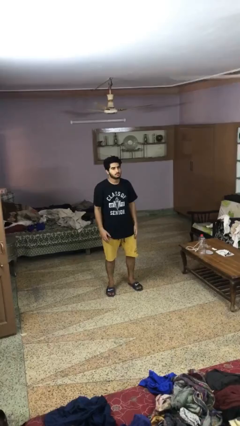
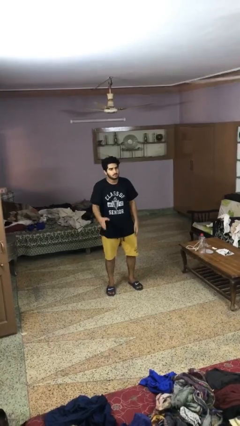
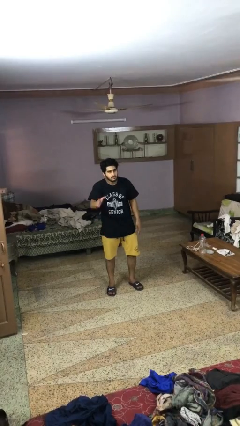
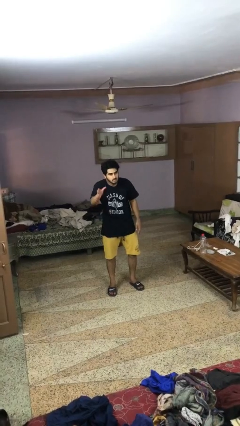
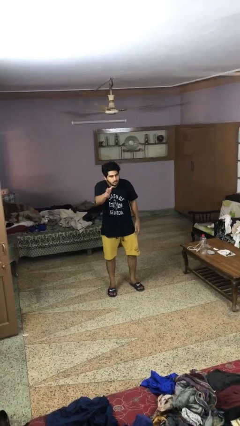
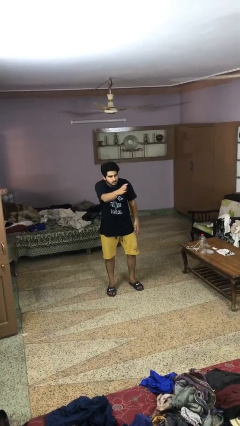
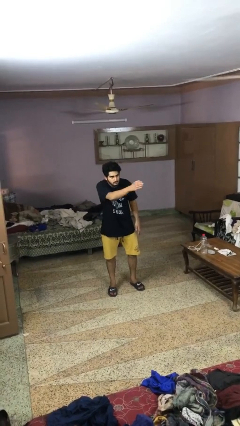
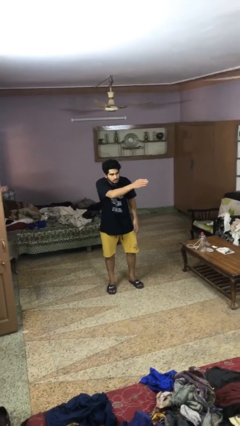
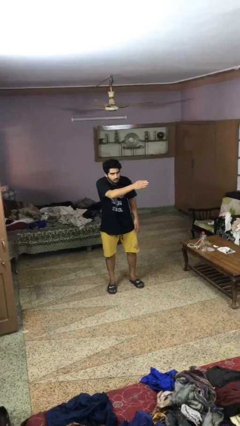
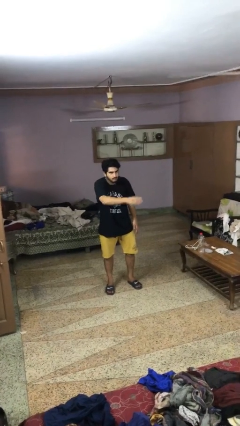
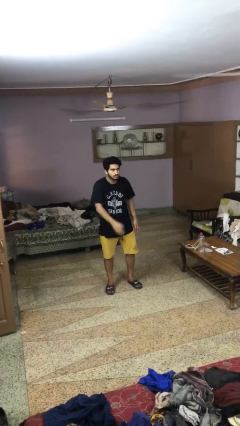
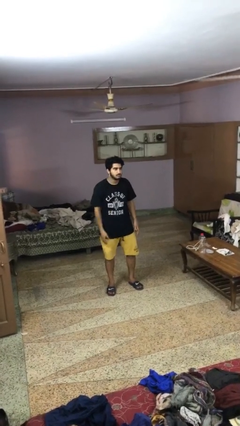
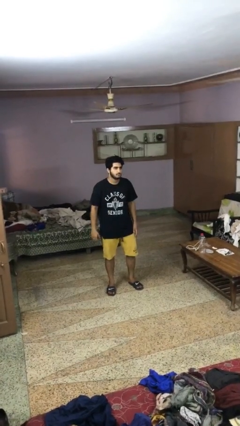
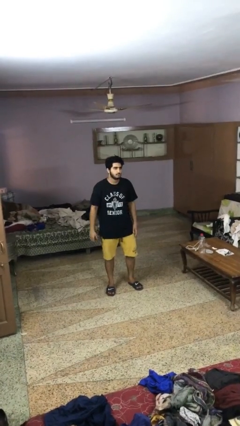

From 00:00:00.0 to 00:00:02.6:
person gestures swipe left

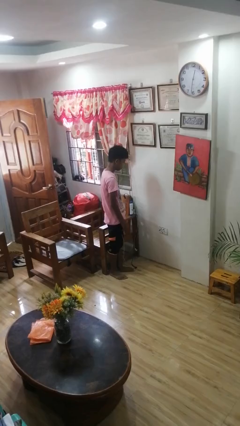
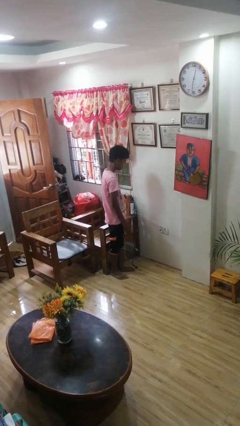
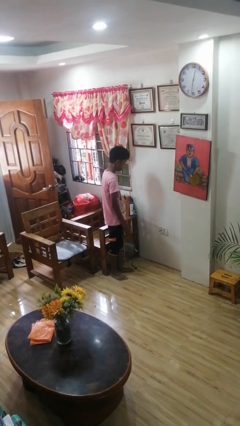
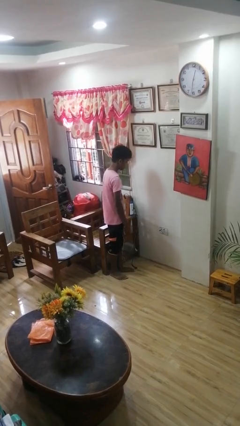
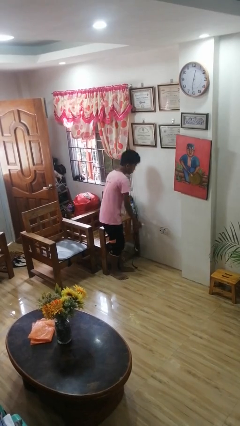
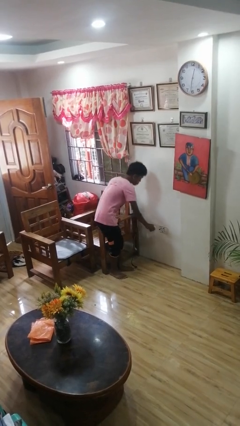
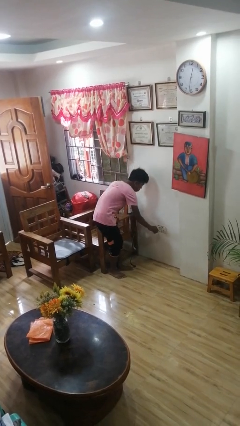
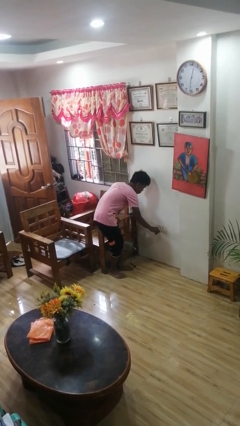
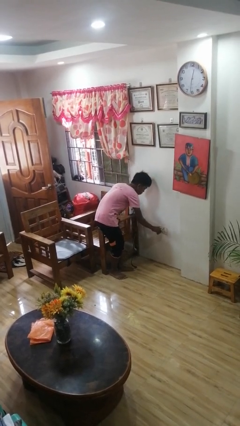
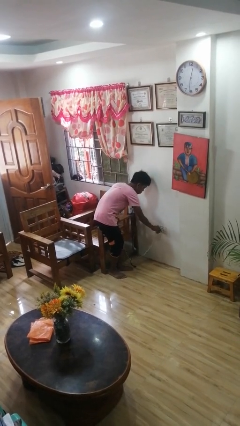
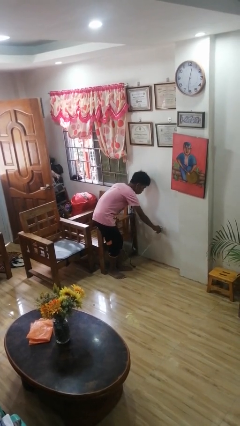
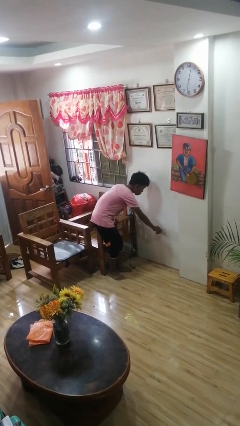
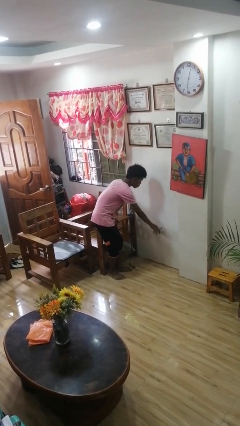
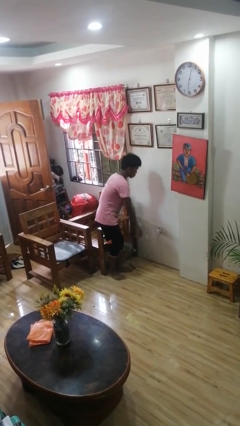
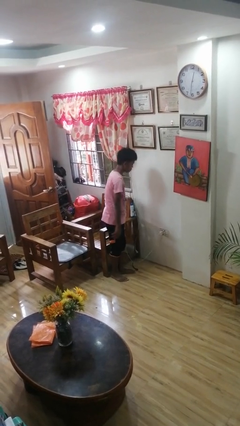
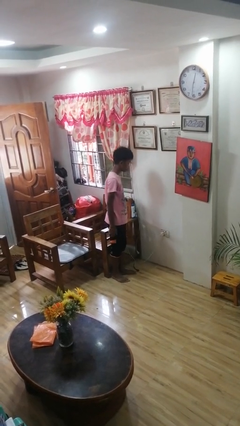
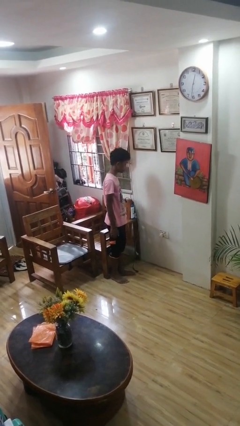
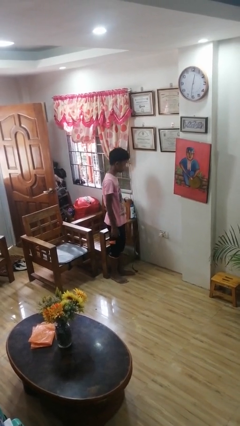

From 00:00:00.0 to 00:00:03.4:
person plugs into electrical socket

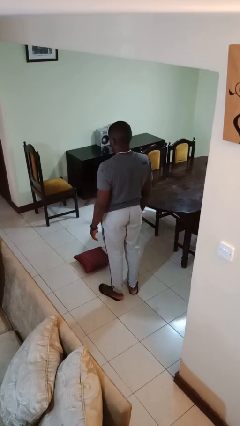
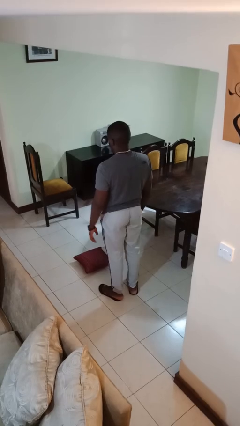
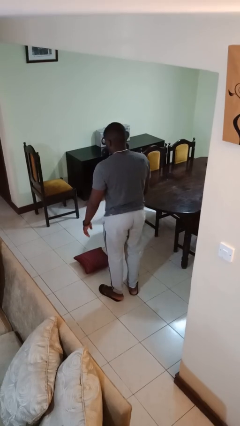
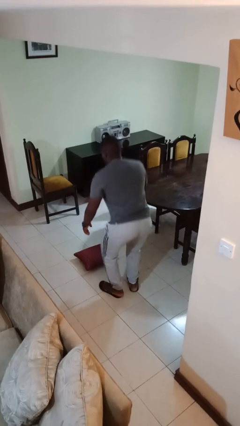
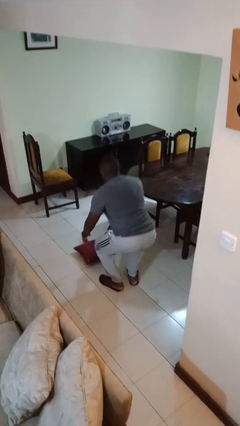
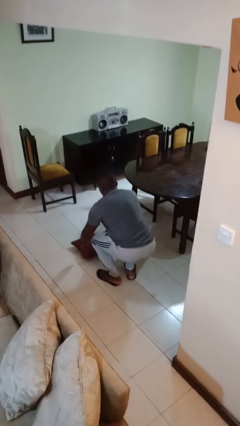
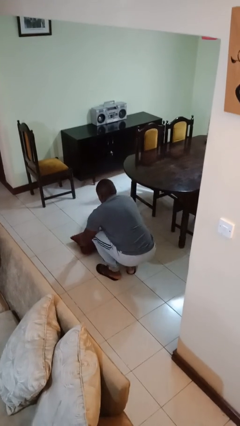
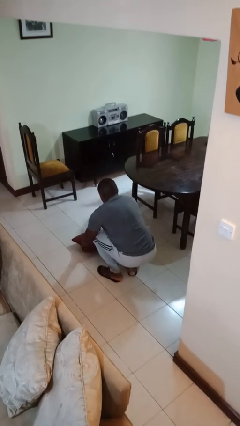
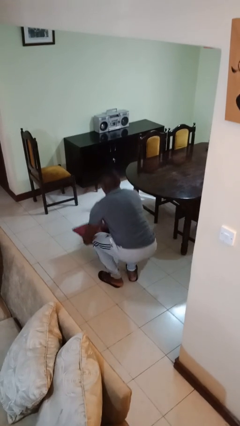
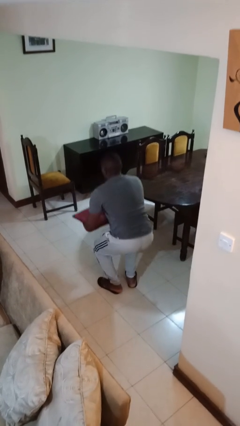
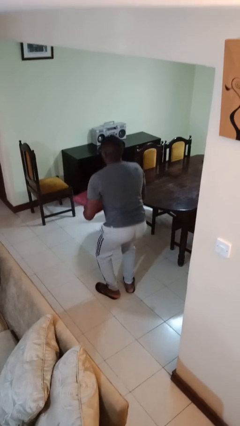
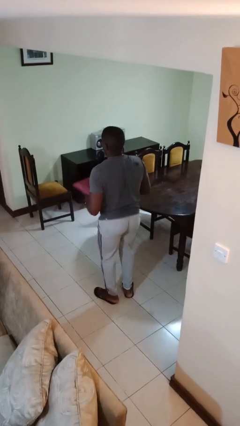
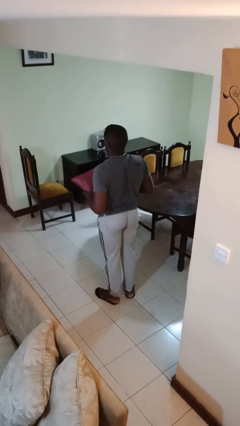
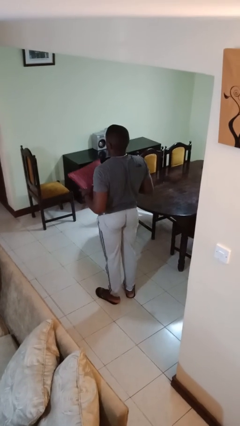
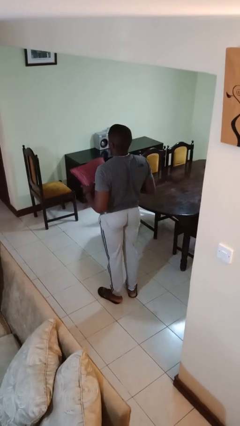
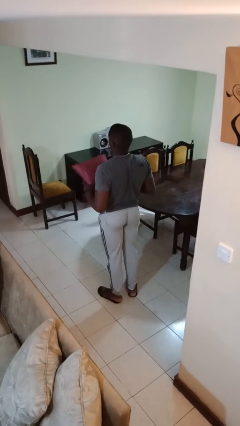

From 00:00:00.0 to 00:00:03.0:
person picks up object from floor

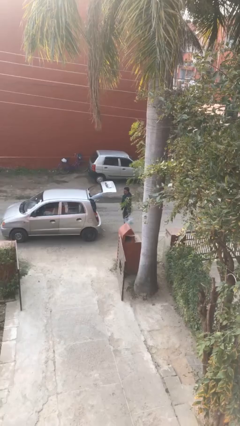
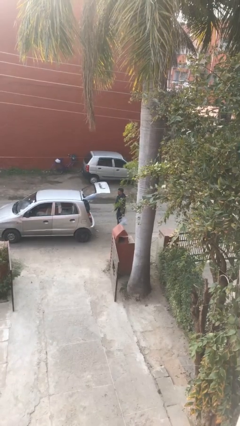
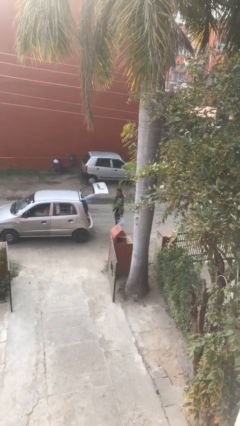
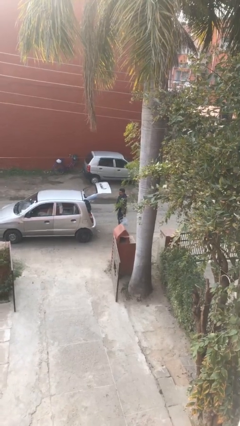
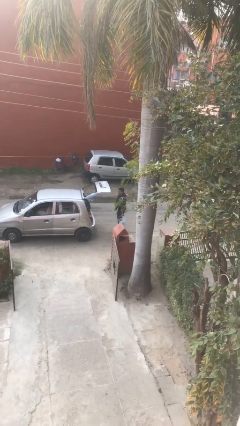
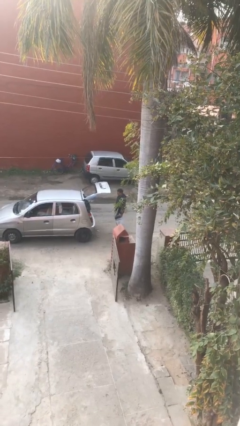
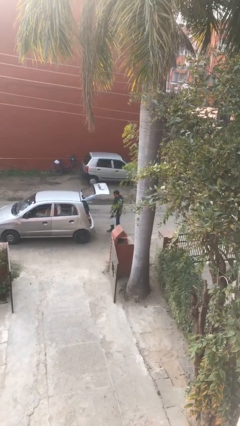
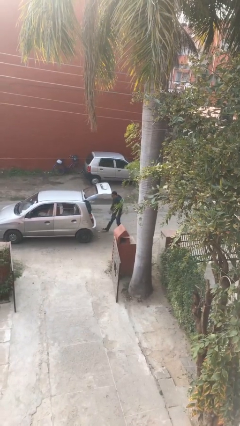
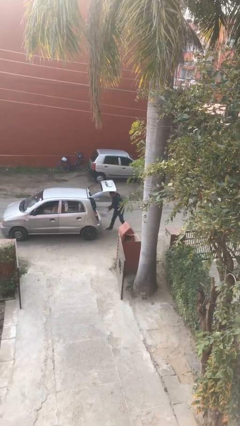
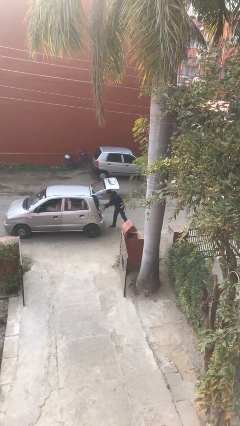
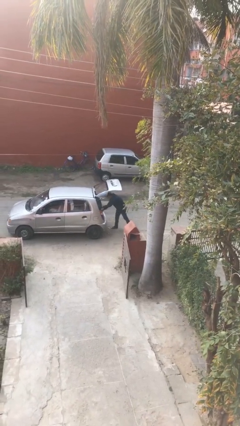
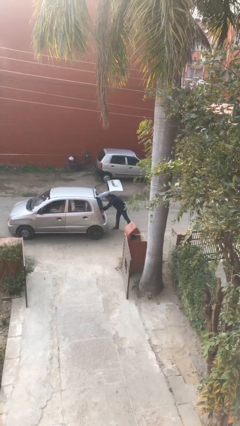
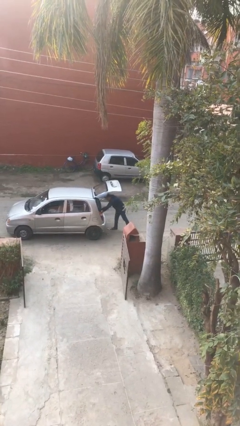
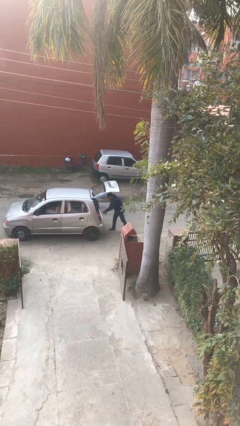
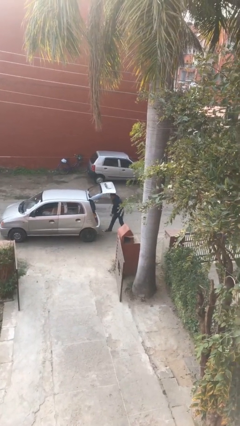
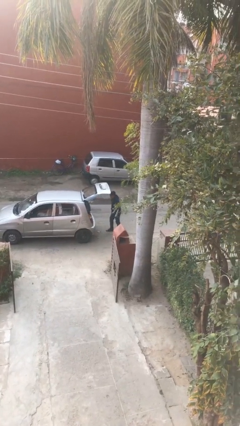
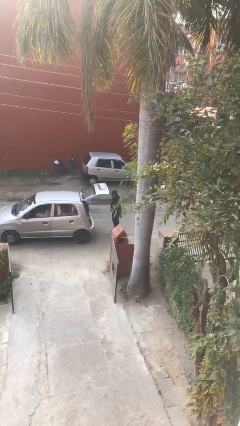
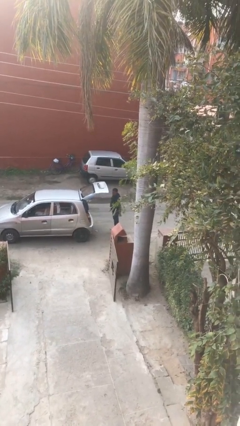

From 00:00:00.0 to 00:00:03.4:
person loads car

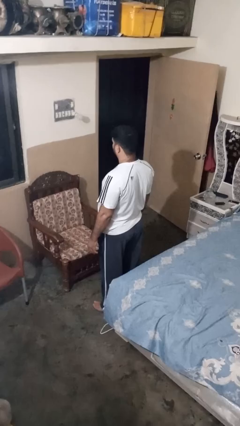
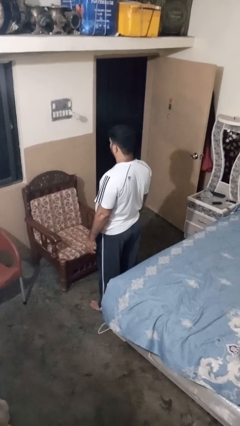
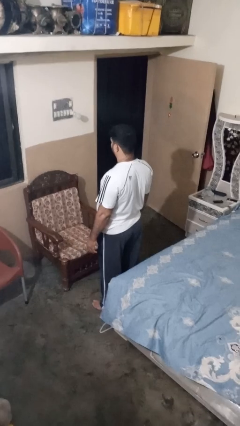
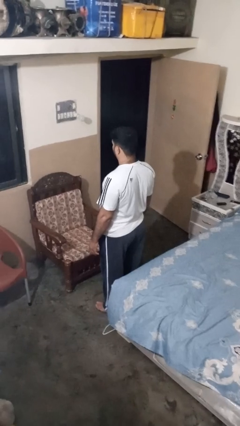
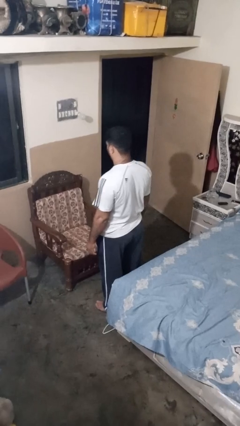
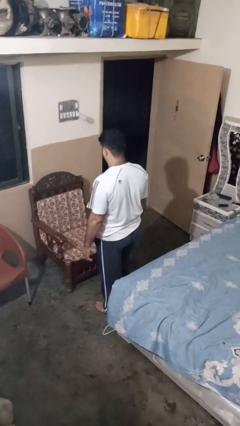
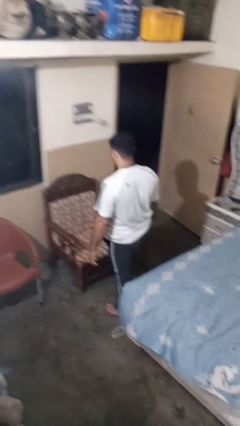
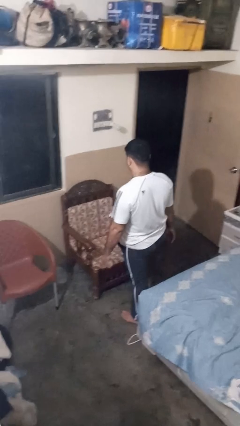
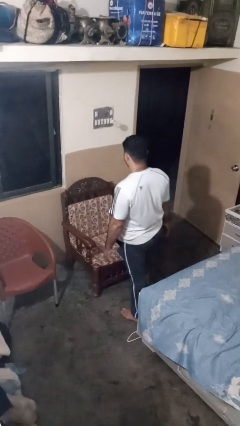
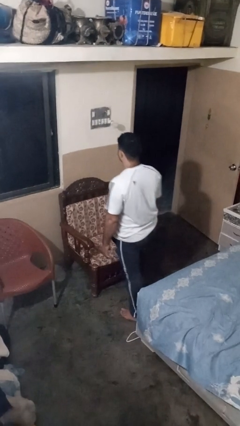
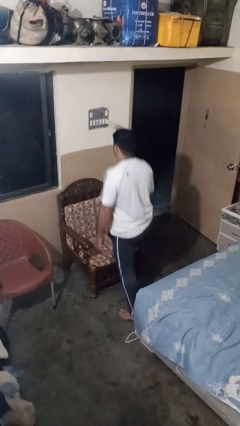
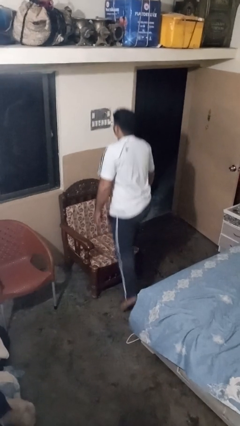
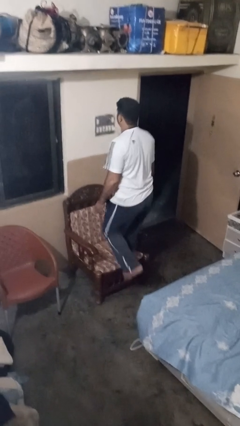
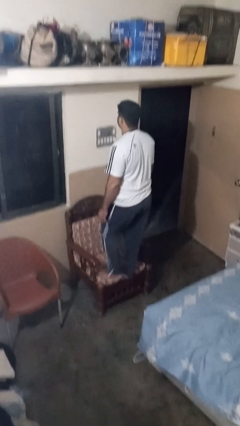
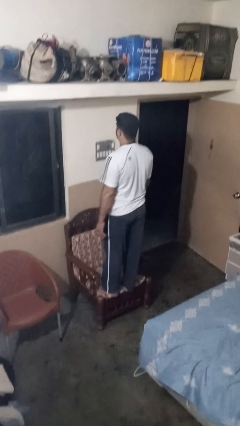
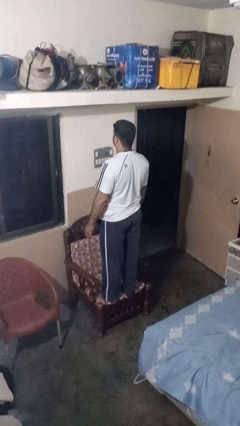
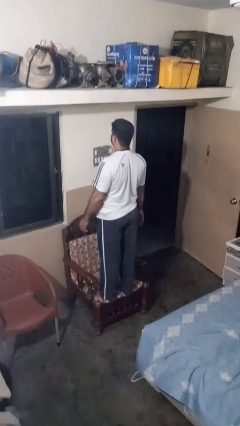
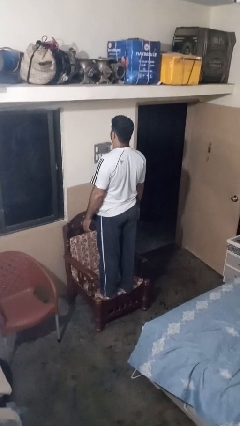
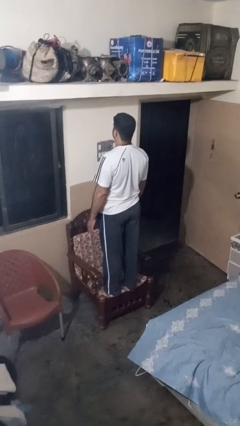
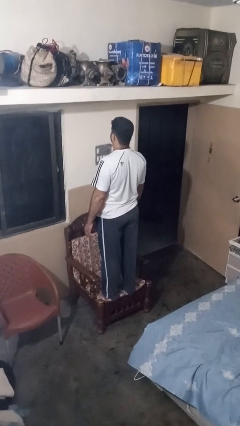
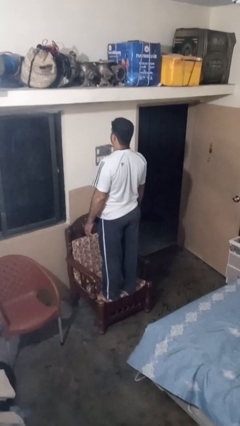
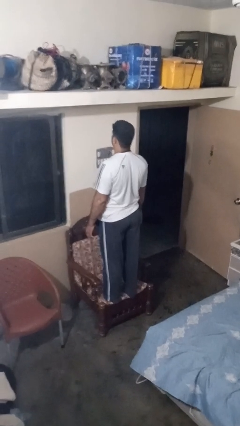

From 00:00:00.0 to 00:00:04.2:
person climbs on couch

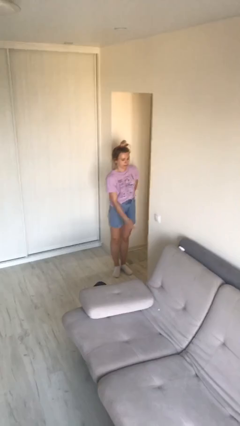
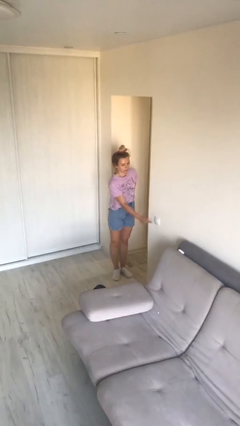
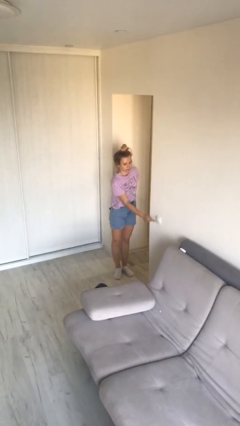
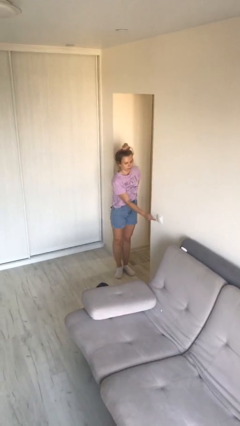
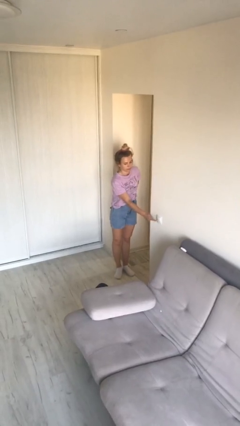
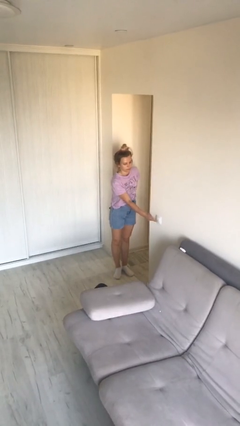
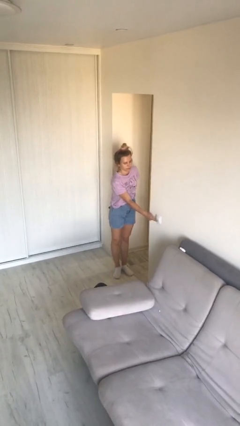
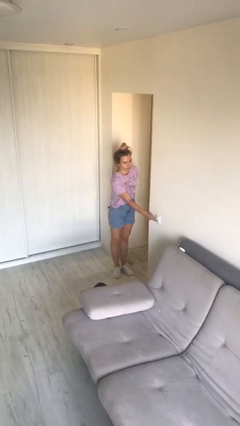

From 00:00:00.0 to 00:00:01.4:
person taps object with finger
